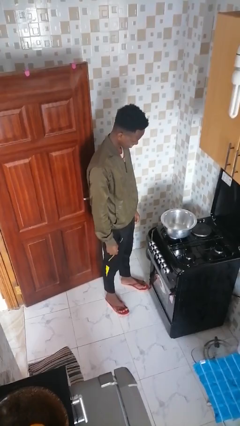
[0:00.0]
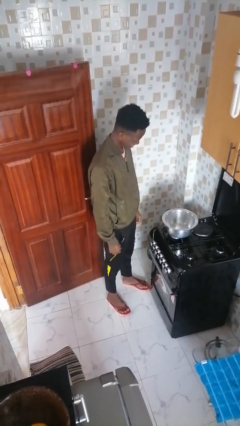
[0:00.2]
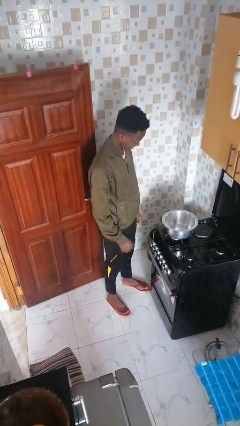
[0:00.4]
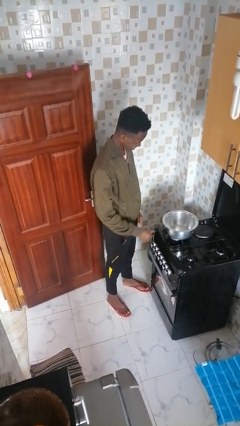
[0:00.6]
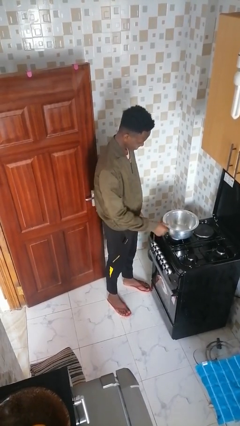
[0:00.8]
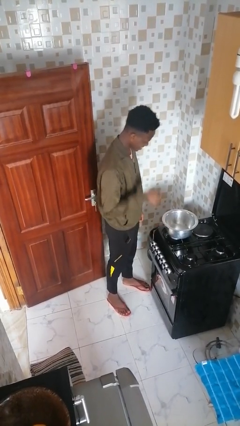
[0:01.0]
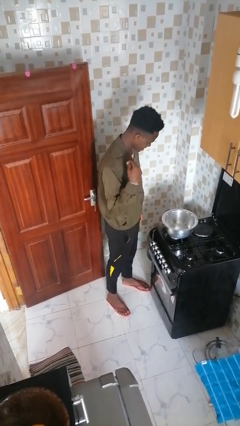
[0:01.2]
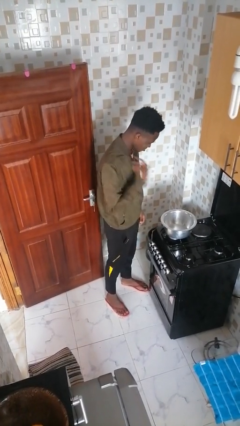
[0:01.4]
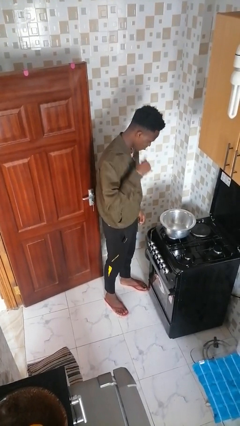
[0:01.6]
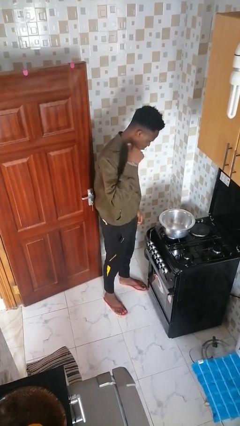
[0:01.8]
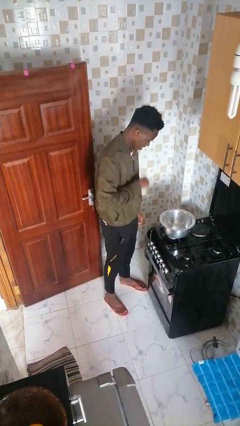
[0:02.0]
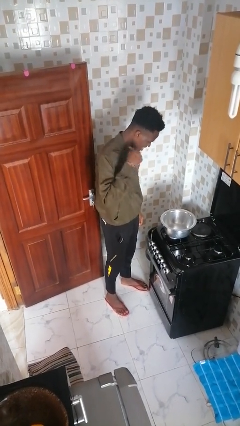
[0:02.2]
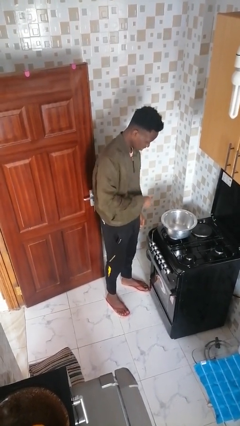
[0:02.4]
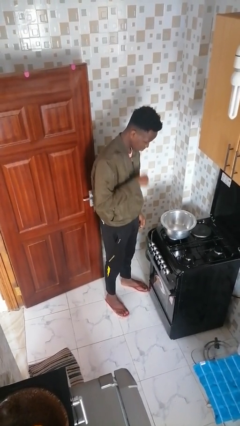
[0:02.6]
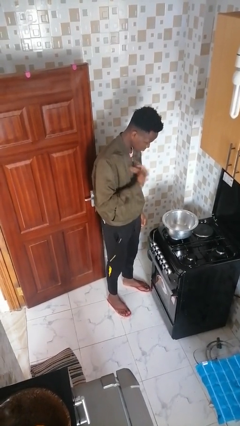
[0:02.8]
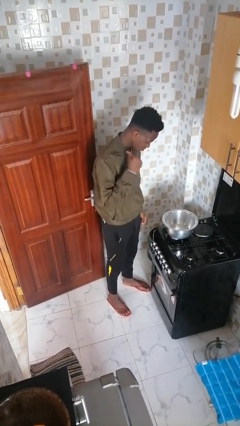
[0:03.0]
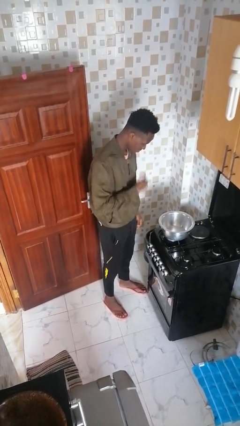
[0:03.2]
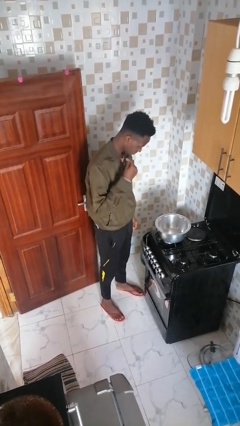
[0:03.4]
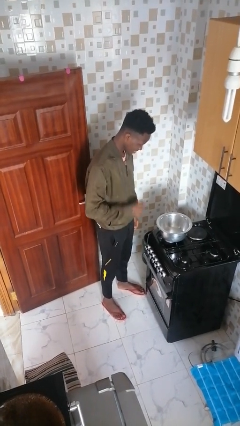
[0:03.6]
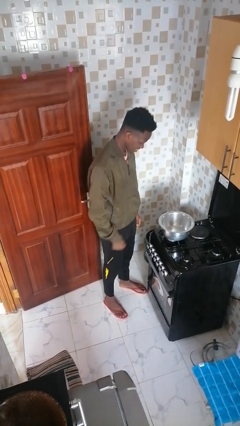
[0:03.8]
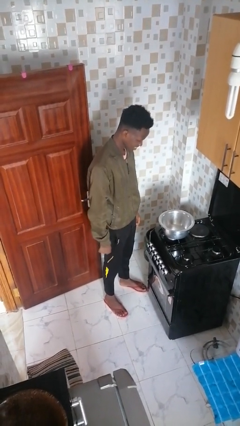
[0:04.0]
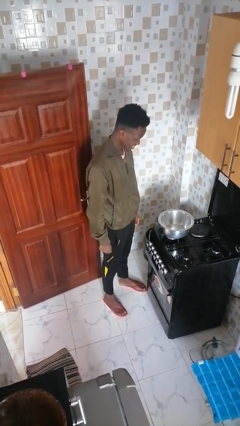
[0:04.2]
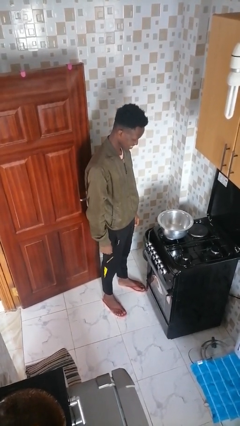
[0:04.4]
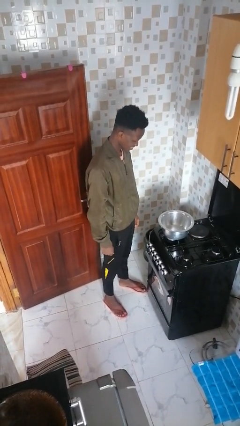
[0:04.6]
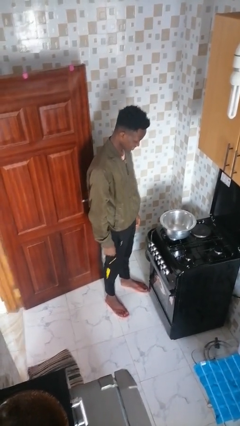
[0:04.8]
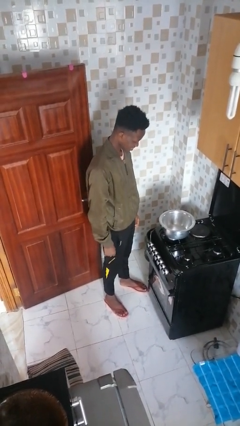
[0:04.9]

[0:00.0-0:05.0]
person burns hand

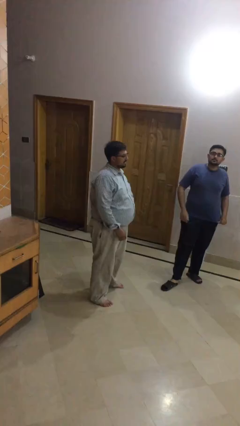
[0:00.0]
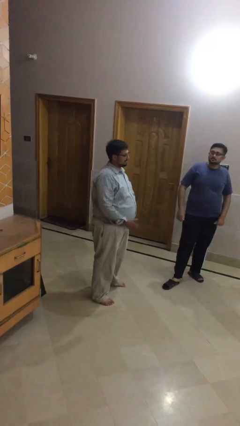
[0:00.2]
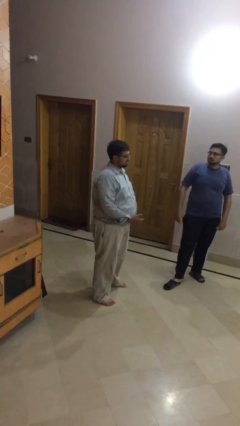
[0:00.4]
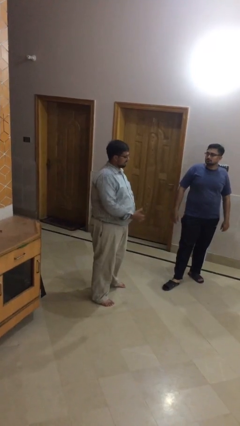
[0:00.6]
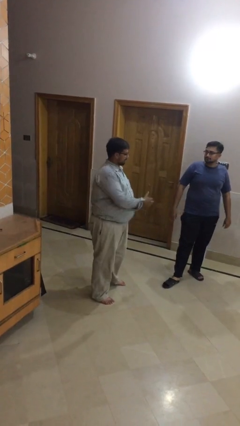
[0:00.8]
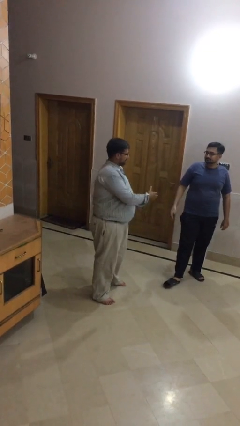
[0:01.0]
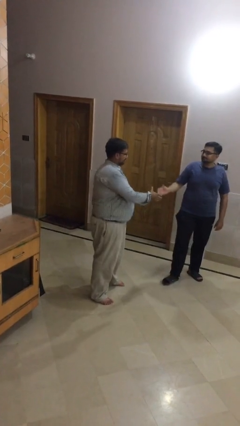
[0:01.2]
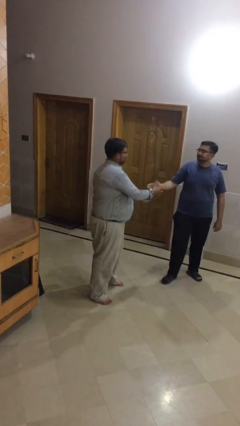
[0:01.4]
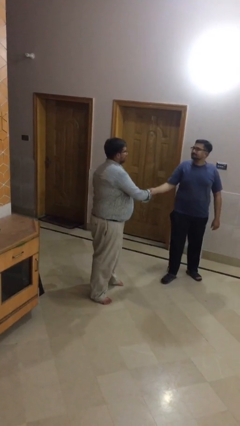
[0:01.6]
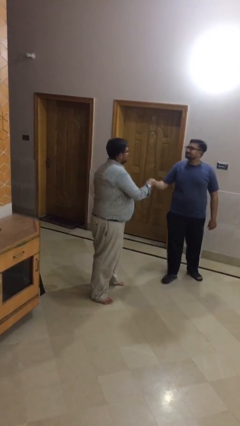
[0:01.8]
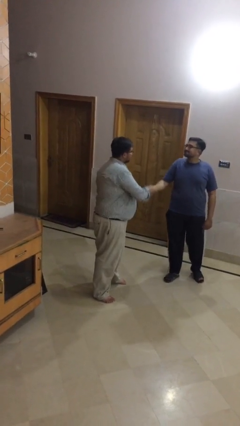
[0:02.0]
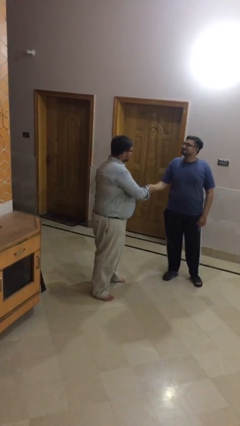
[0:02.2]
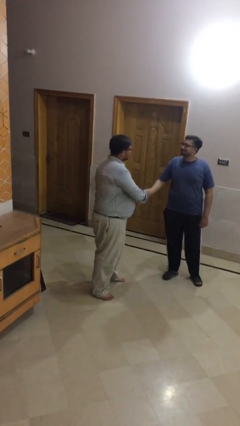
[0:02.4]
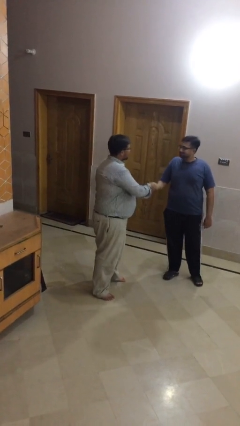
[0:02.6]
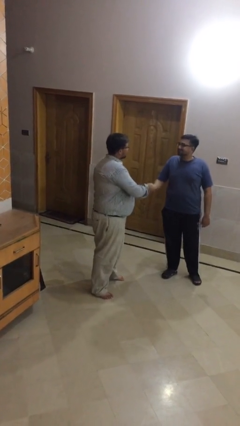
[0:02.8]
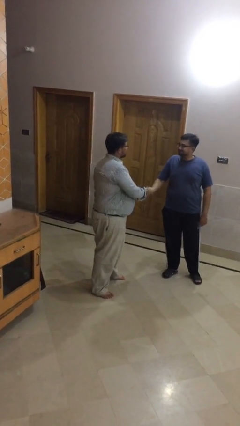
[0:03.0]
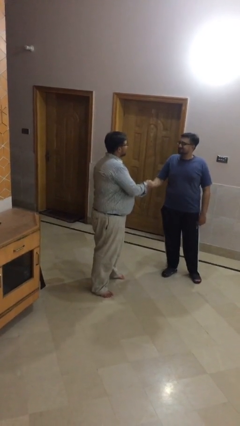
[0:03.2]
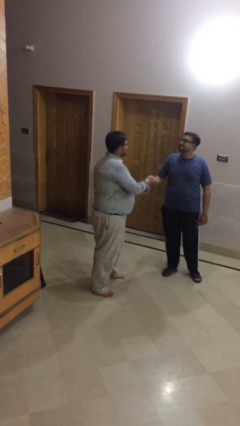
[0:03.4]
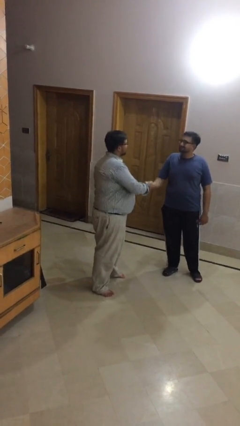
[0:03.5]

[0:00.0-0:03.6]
person shakes hand

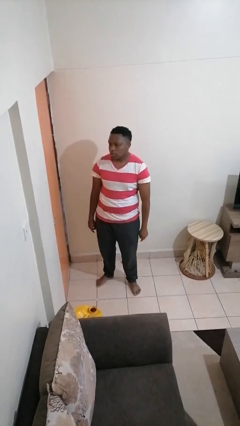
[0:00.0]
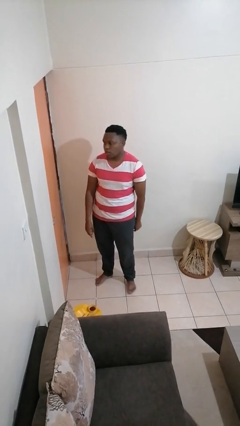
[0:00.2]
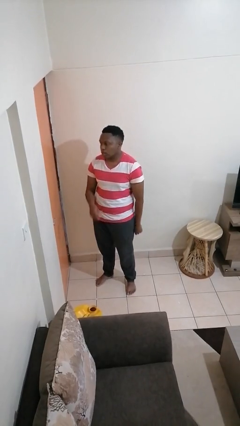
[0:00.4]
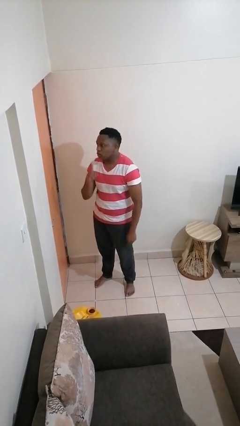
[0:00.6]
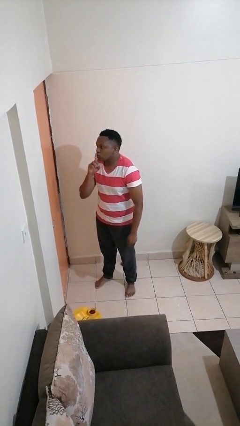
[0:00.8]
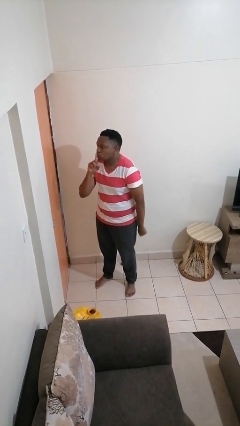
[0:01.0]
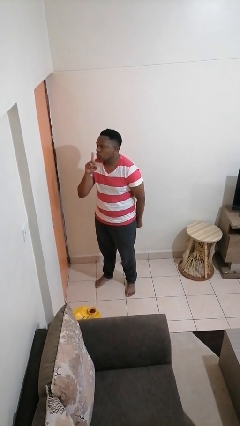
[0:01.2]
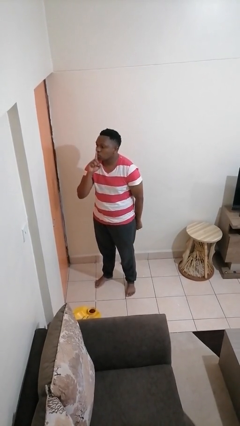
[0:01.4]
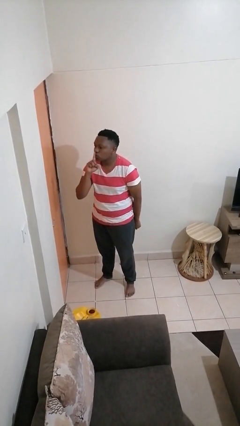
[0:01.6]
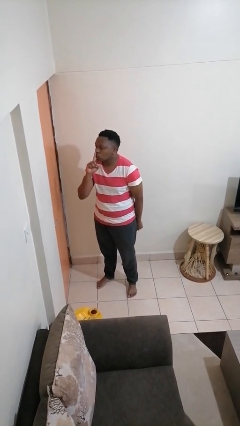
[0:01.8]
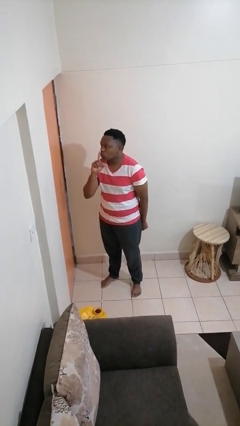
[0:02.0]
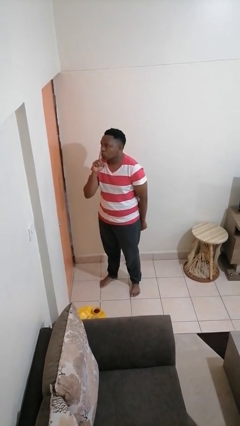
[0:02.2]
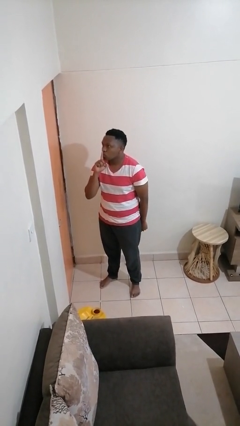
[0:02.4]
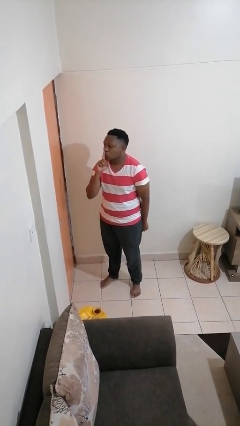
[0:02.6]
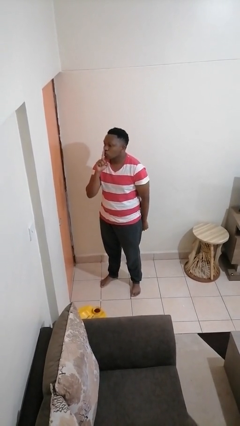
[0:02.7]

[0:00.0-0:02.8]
person gestures be quiet

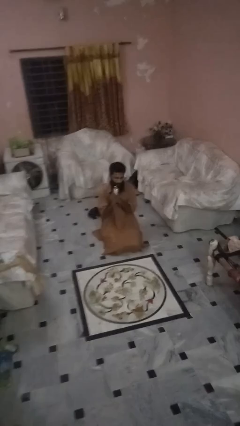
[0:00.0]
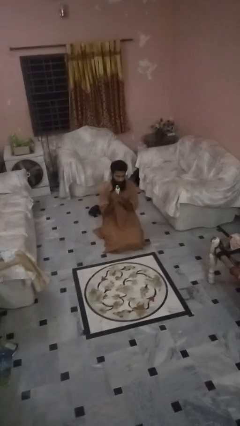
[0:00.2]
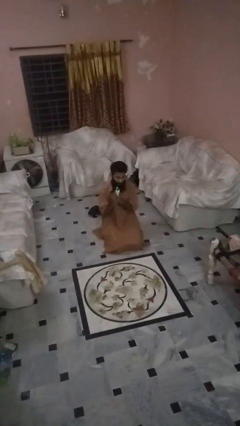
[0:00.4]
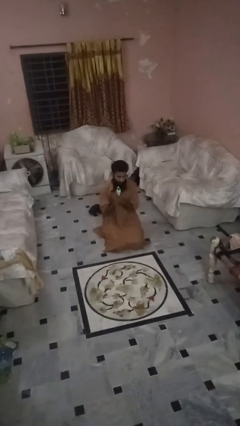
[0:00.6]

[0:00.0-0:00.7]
person drops object

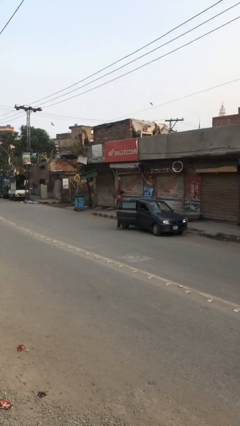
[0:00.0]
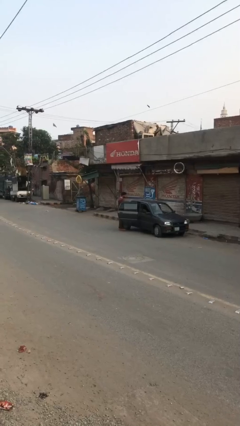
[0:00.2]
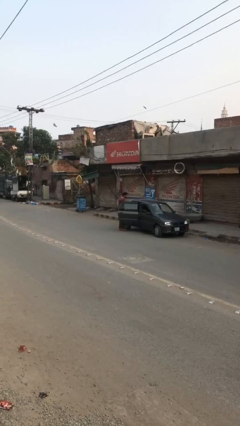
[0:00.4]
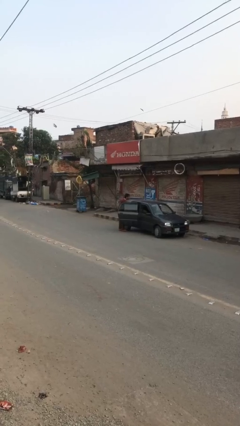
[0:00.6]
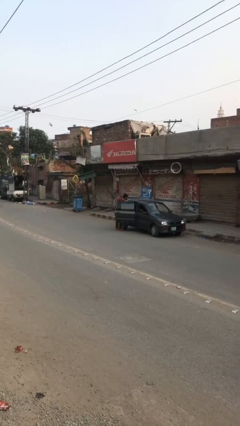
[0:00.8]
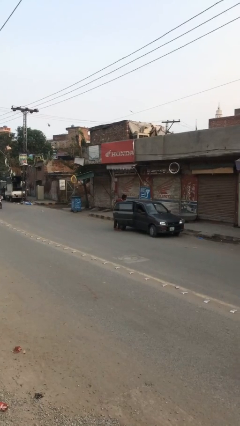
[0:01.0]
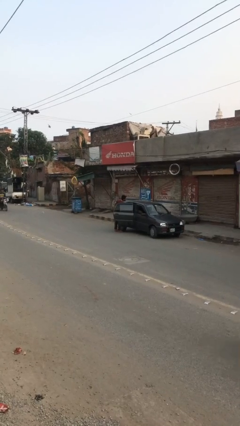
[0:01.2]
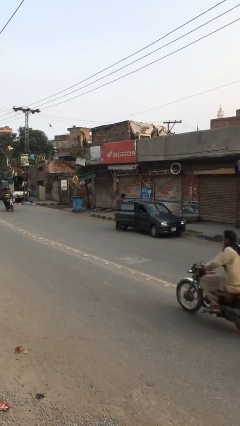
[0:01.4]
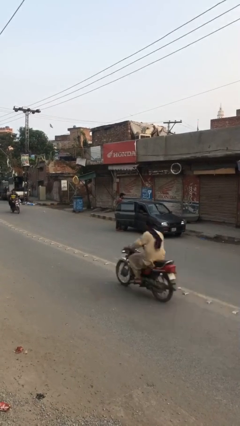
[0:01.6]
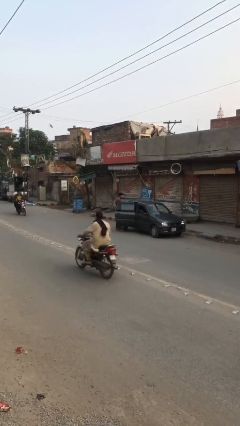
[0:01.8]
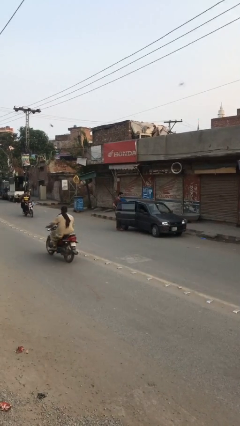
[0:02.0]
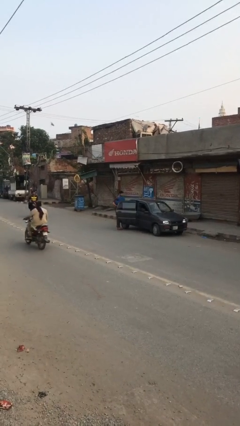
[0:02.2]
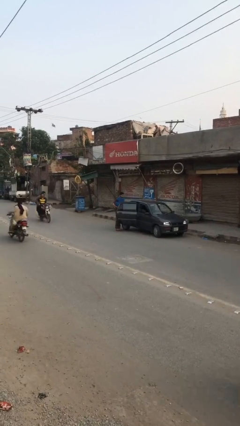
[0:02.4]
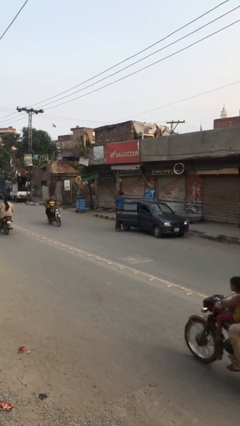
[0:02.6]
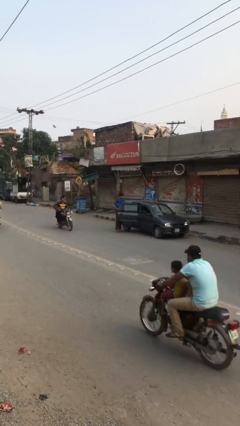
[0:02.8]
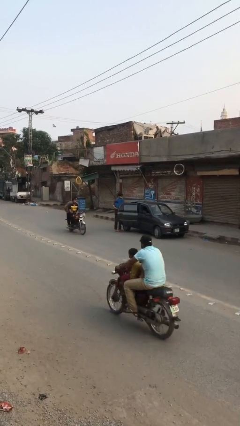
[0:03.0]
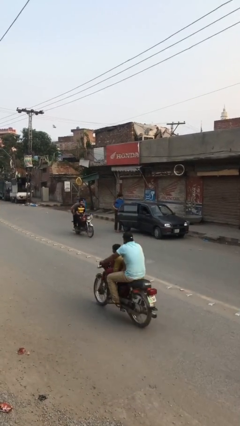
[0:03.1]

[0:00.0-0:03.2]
person unloads car

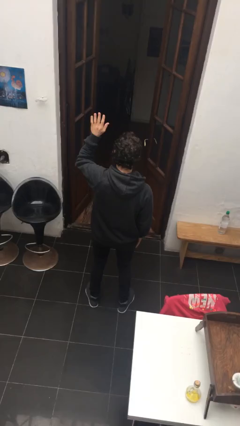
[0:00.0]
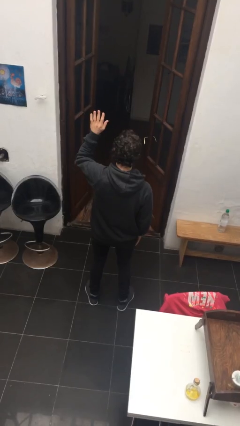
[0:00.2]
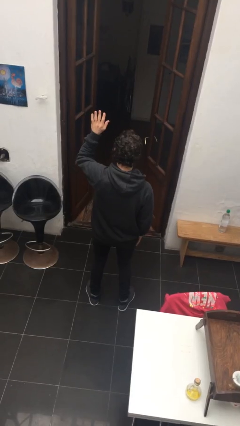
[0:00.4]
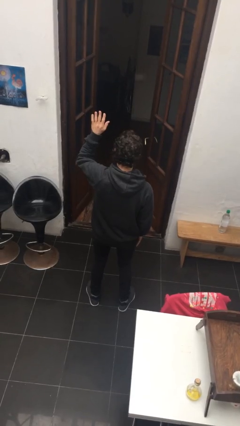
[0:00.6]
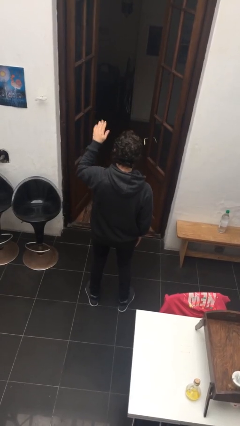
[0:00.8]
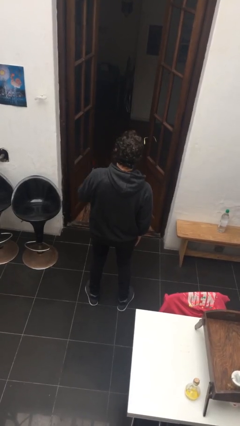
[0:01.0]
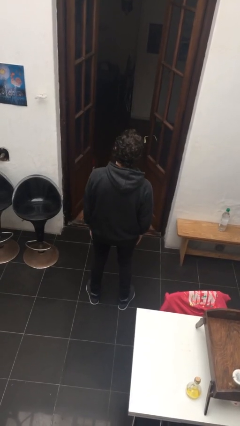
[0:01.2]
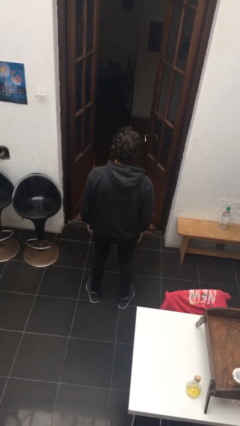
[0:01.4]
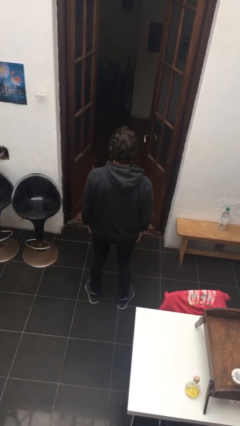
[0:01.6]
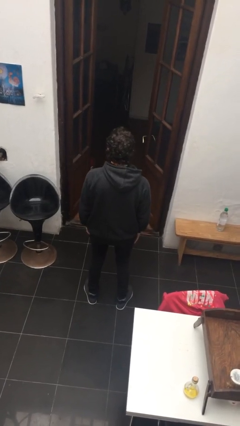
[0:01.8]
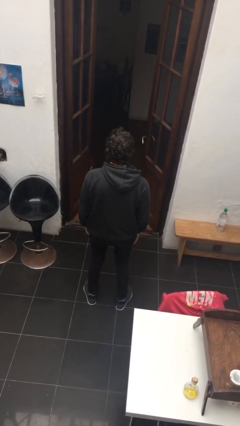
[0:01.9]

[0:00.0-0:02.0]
person gestures lower hand

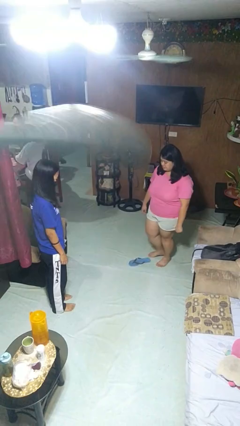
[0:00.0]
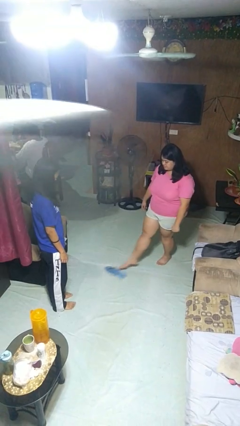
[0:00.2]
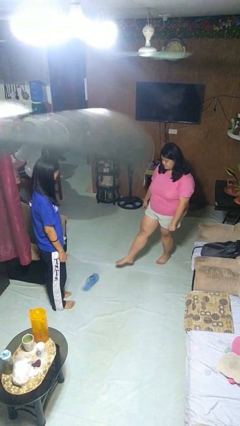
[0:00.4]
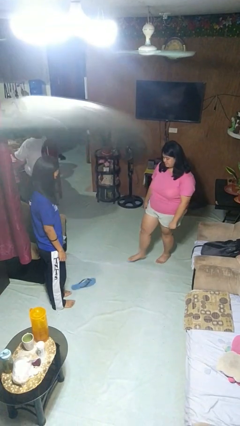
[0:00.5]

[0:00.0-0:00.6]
person kicks object to person
